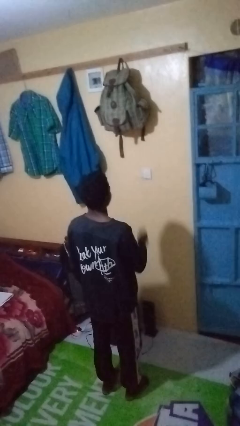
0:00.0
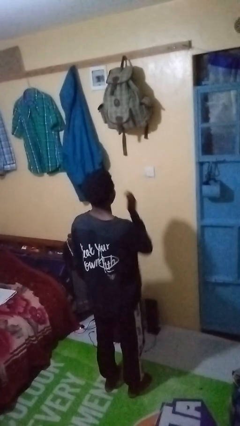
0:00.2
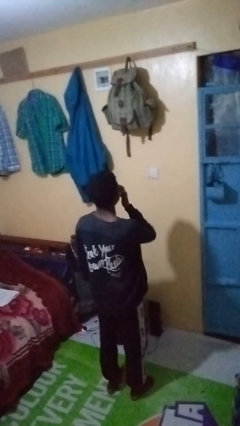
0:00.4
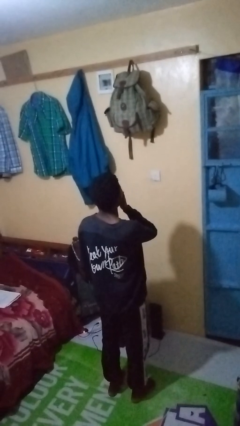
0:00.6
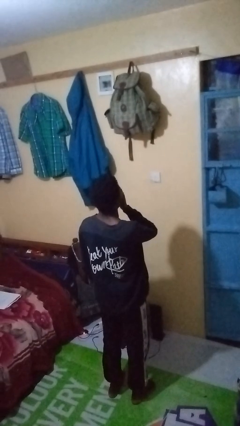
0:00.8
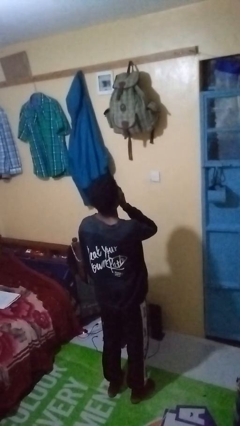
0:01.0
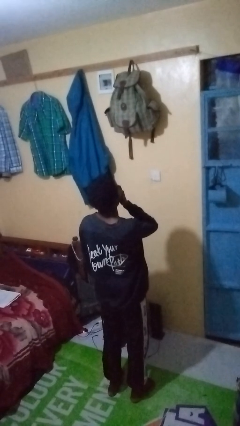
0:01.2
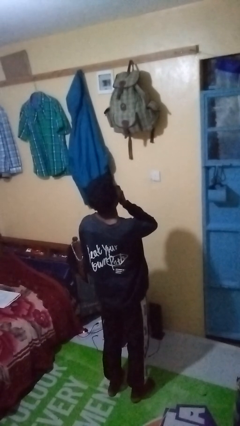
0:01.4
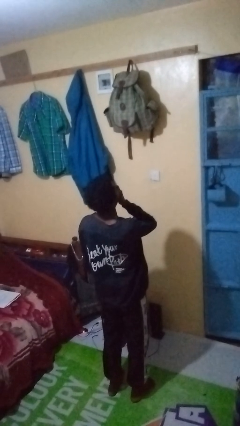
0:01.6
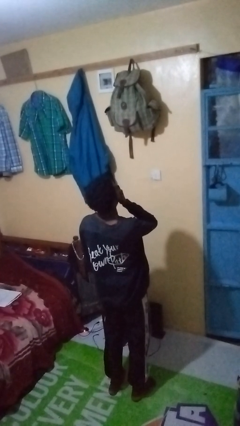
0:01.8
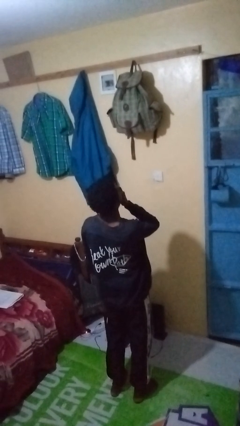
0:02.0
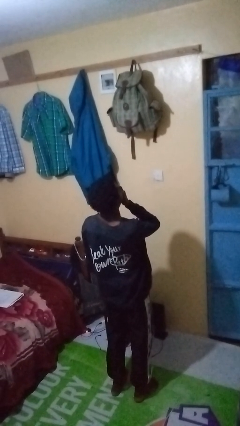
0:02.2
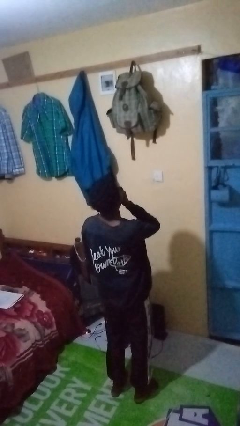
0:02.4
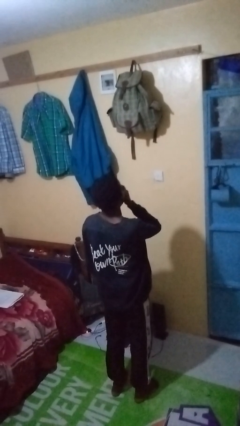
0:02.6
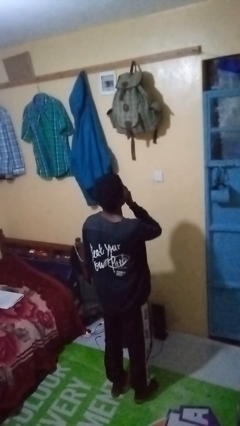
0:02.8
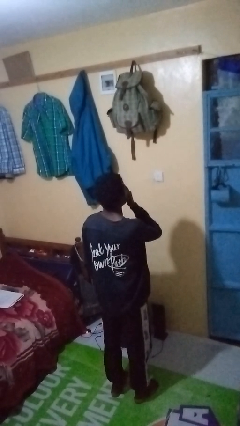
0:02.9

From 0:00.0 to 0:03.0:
person yawns

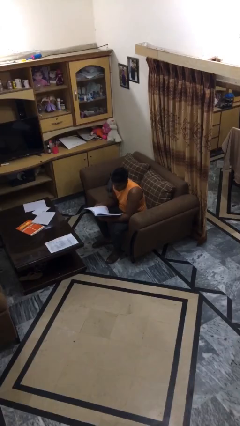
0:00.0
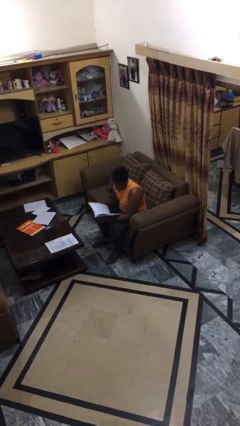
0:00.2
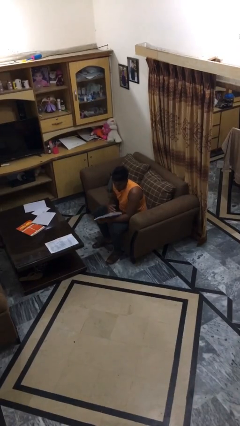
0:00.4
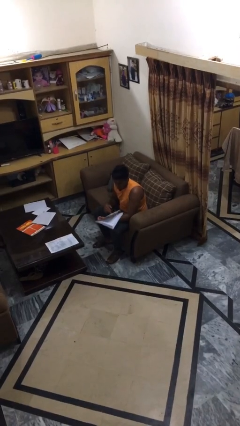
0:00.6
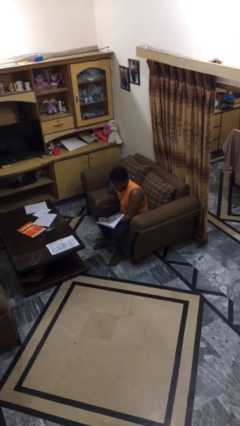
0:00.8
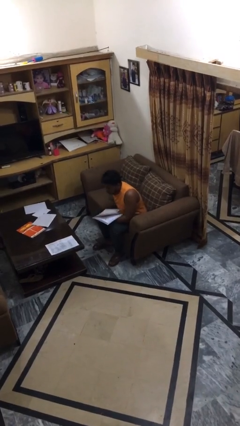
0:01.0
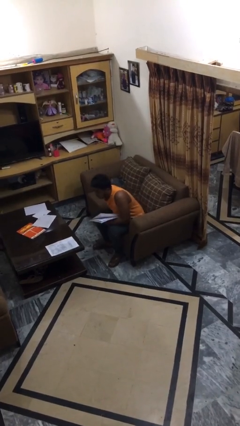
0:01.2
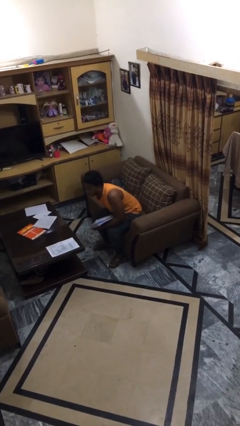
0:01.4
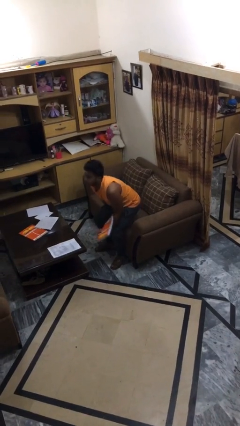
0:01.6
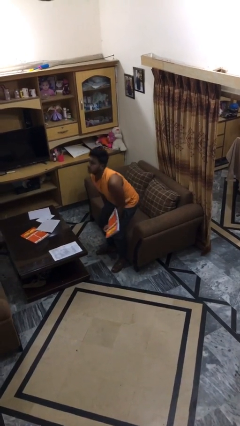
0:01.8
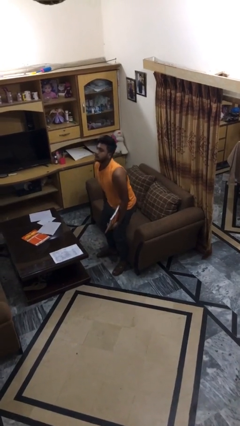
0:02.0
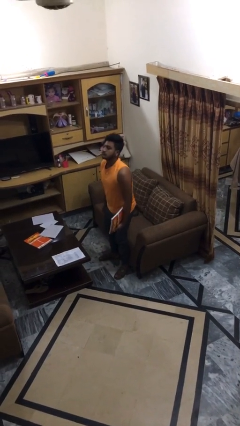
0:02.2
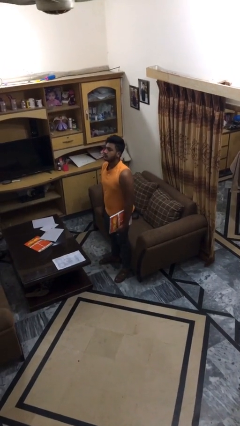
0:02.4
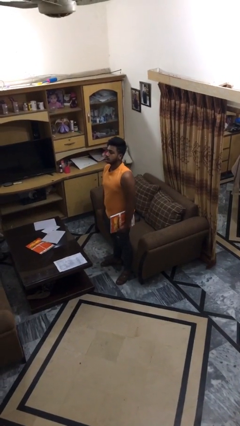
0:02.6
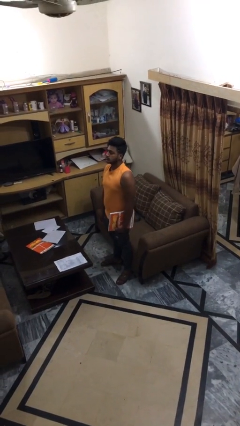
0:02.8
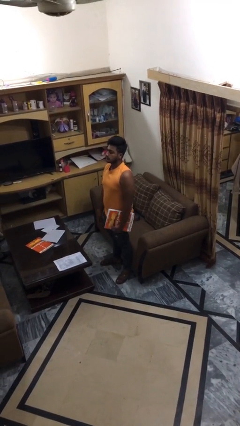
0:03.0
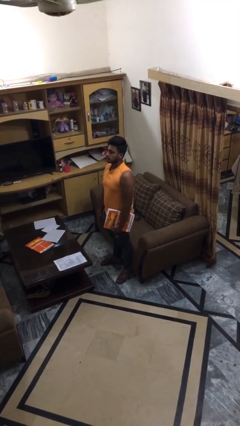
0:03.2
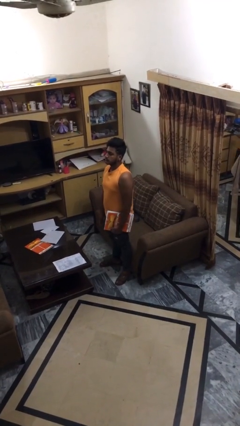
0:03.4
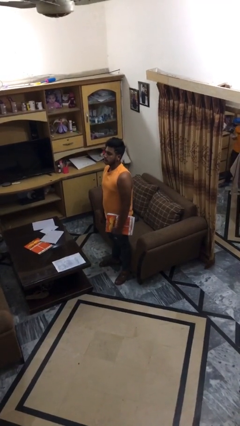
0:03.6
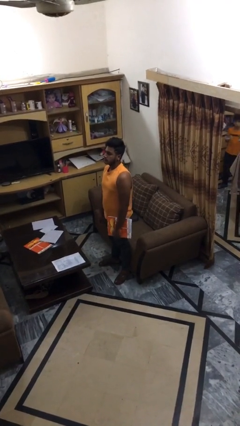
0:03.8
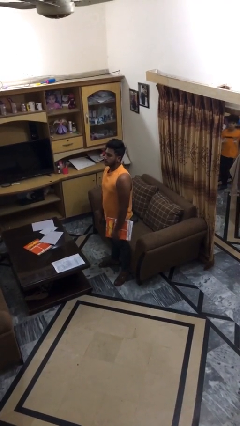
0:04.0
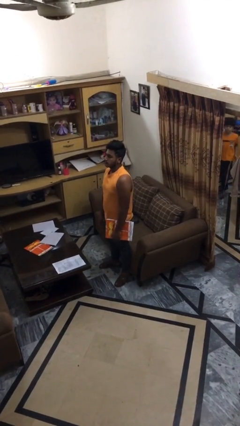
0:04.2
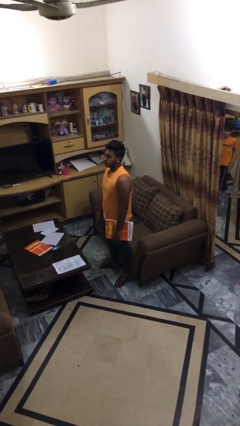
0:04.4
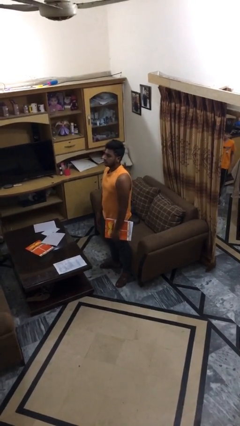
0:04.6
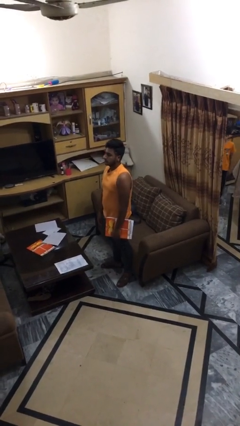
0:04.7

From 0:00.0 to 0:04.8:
person stands up

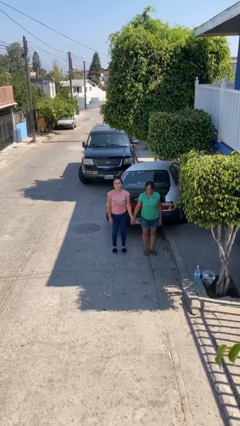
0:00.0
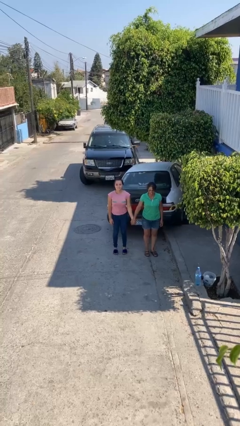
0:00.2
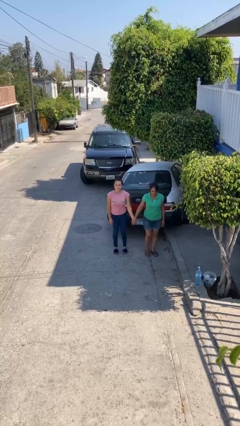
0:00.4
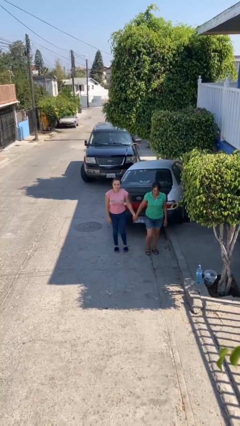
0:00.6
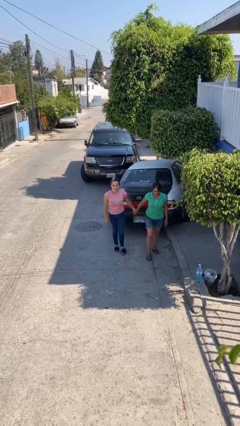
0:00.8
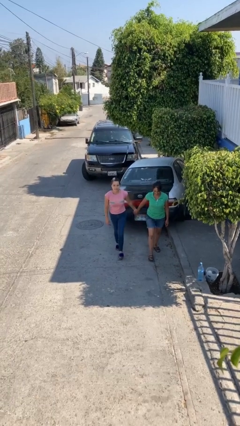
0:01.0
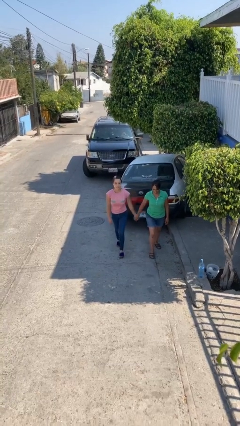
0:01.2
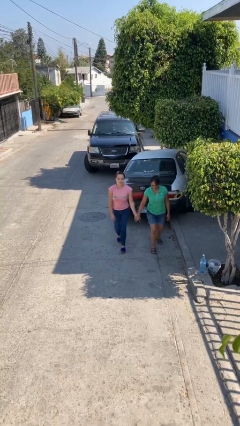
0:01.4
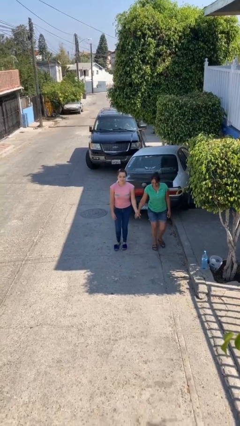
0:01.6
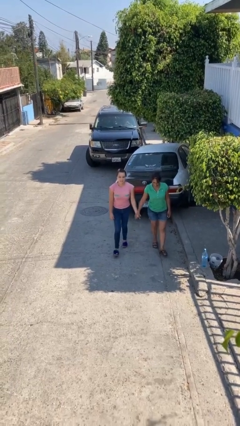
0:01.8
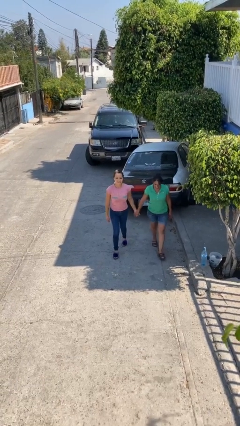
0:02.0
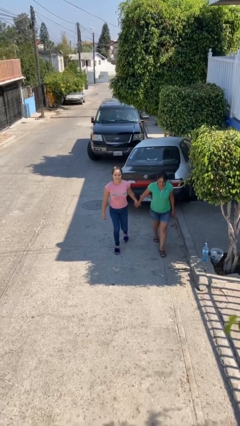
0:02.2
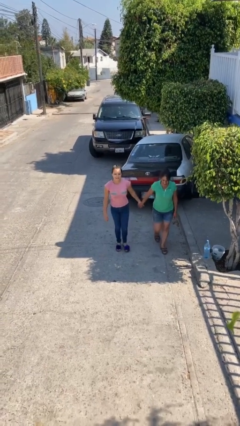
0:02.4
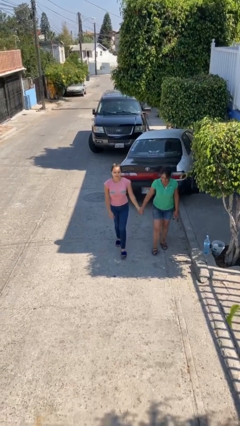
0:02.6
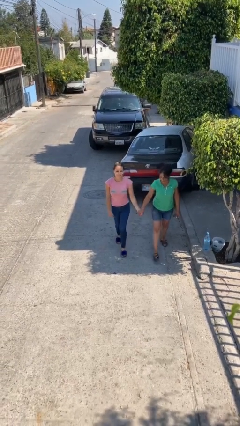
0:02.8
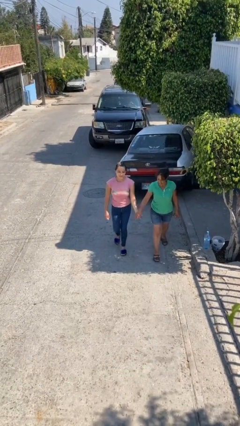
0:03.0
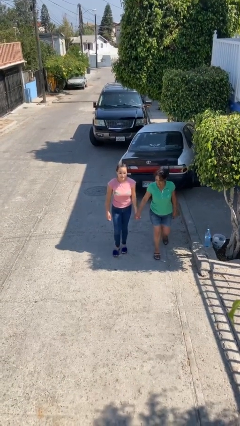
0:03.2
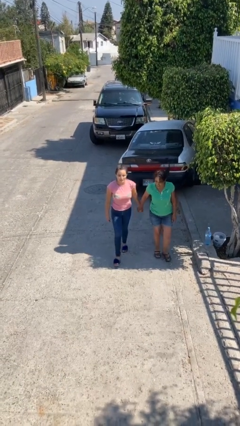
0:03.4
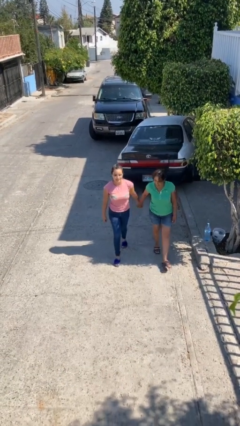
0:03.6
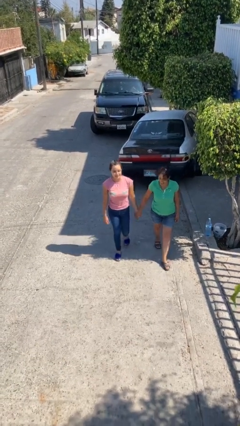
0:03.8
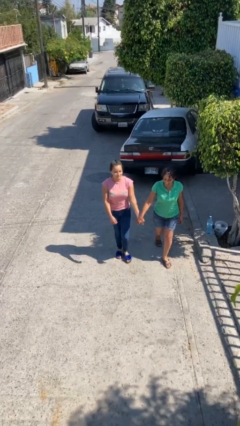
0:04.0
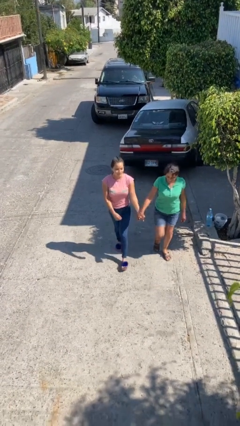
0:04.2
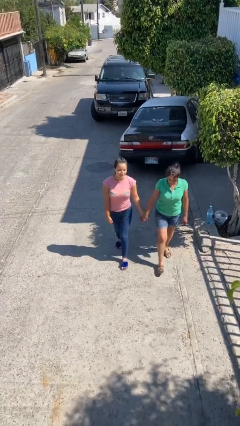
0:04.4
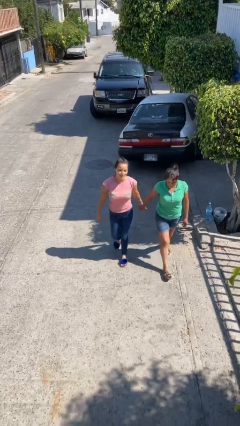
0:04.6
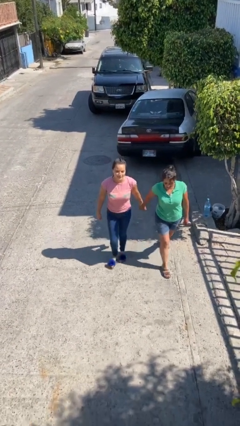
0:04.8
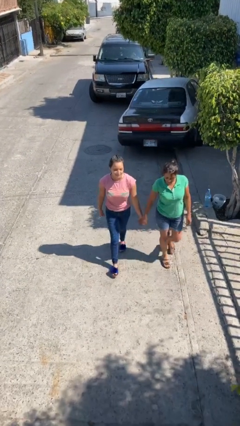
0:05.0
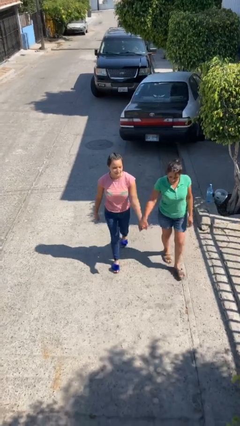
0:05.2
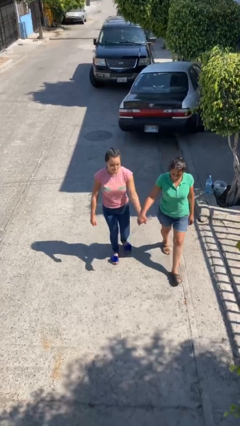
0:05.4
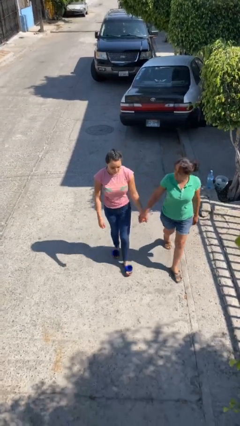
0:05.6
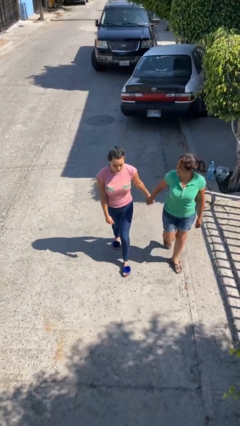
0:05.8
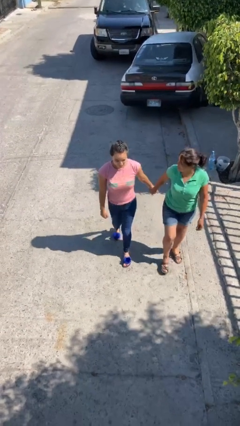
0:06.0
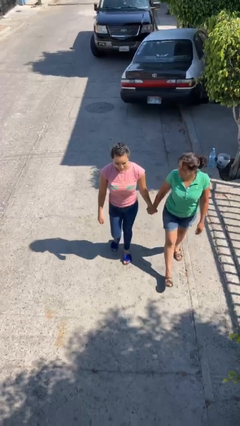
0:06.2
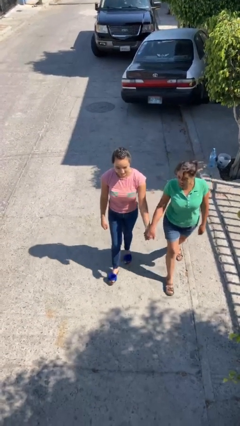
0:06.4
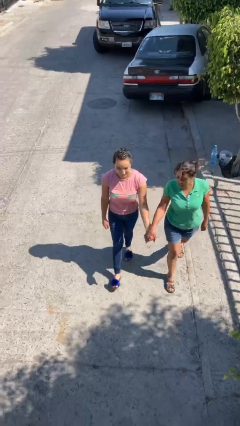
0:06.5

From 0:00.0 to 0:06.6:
person holds hand

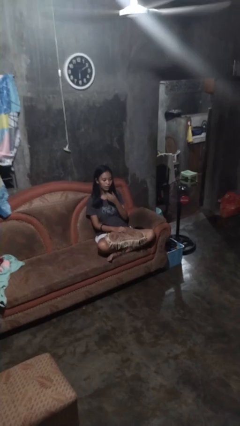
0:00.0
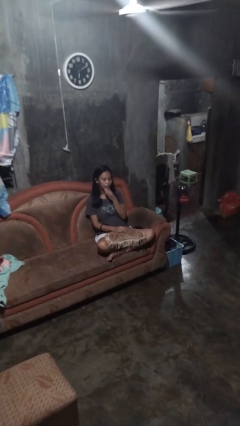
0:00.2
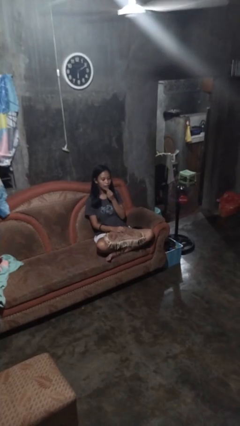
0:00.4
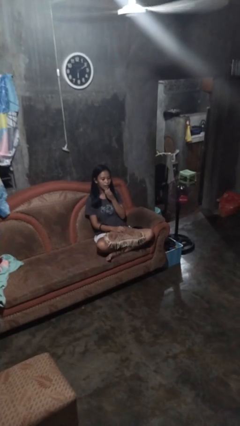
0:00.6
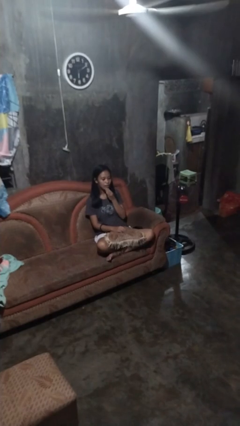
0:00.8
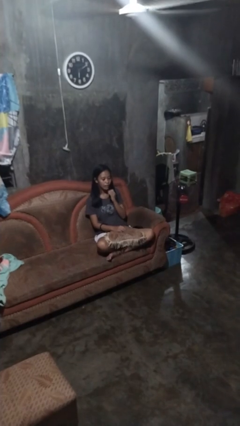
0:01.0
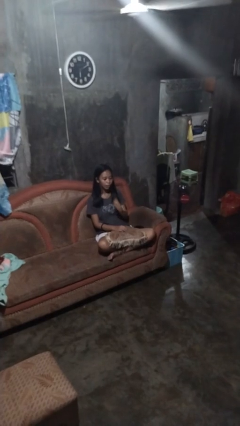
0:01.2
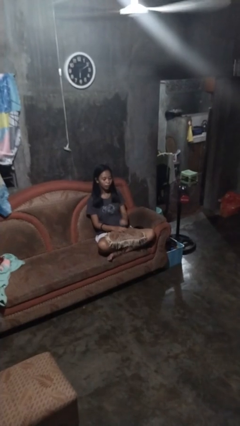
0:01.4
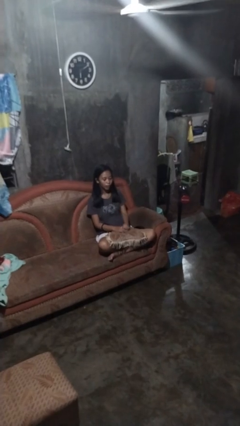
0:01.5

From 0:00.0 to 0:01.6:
person strokes chin

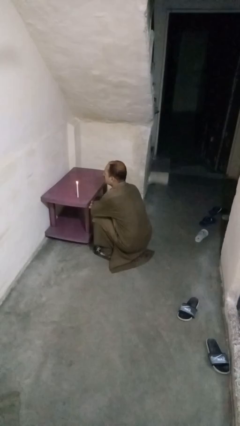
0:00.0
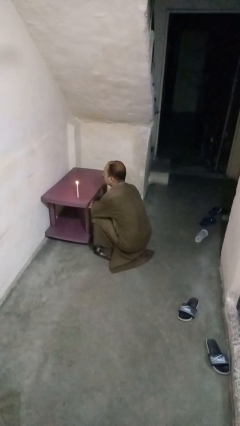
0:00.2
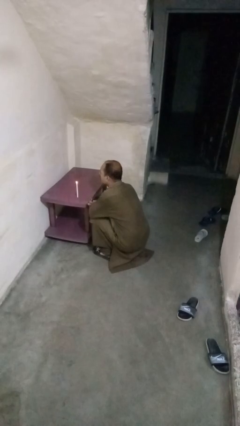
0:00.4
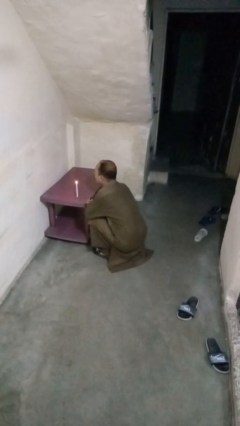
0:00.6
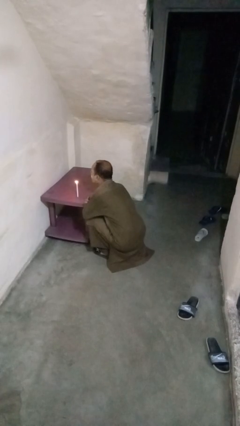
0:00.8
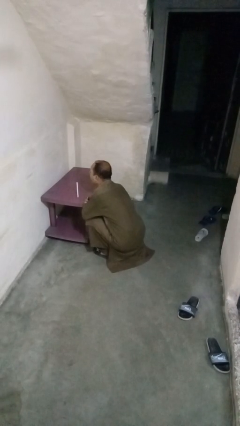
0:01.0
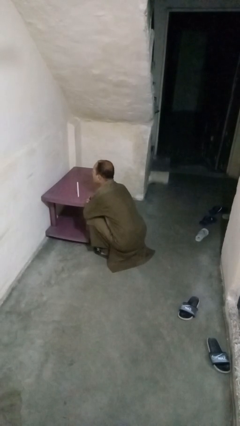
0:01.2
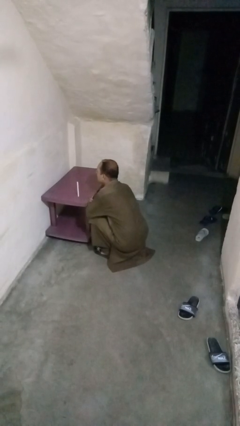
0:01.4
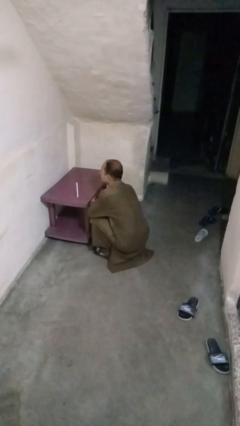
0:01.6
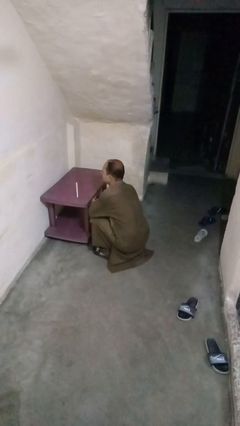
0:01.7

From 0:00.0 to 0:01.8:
person extinguishes candle
